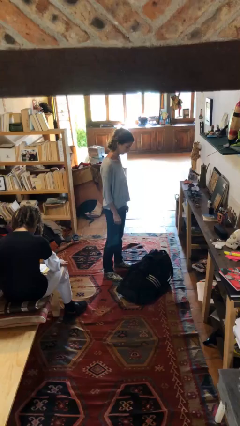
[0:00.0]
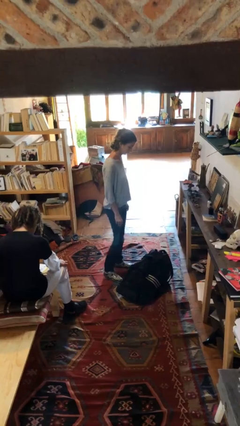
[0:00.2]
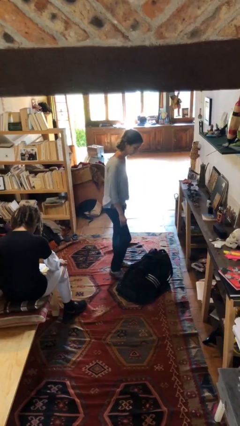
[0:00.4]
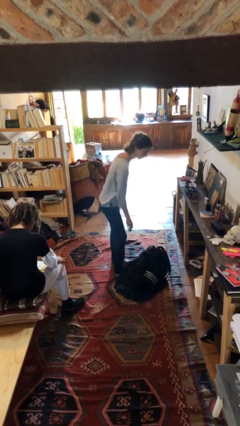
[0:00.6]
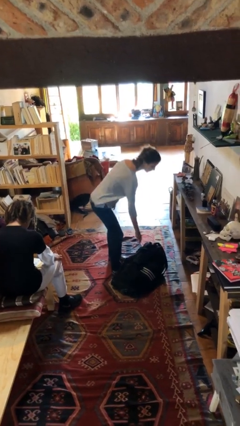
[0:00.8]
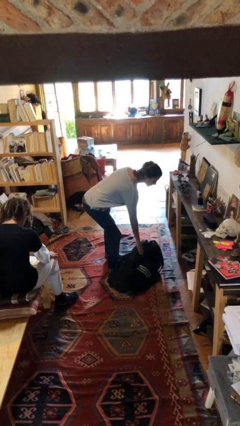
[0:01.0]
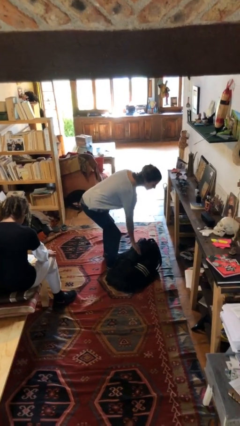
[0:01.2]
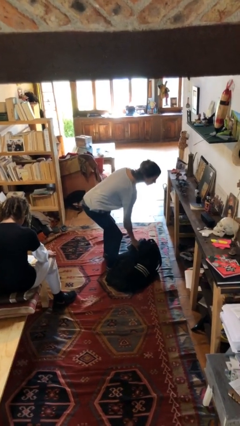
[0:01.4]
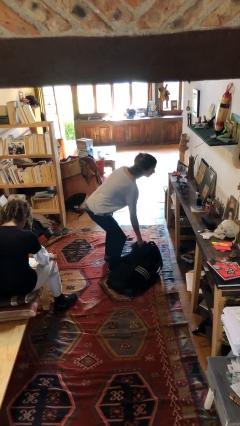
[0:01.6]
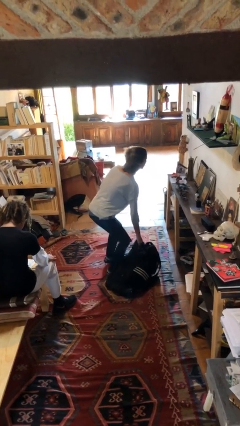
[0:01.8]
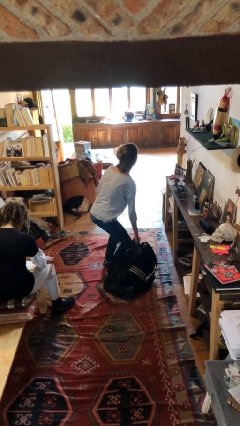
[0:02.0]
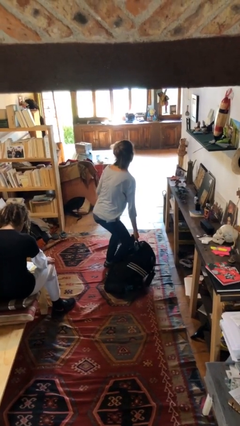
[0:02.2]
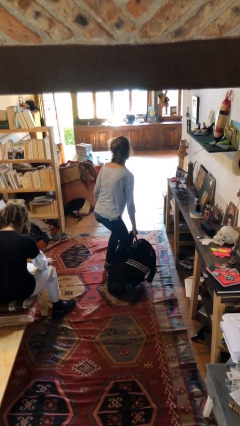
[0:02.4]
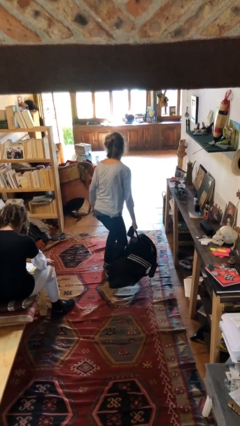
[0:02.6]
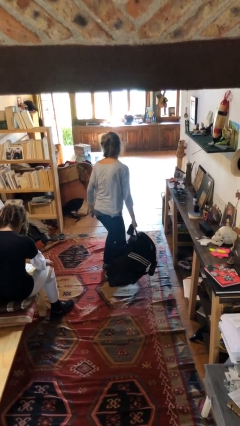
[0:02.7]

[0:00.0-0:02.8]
person picks up object from floor

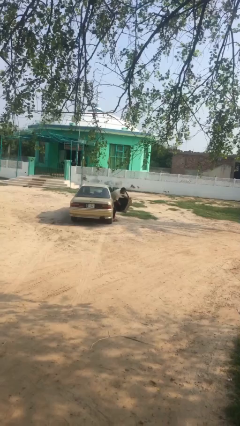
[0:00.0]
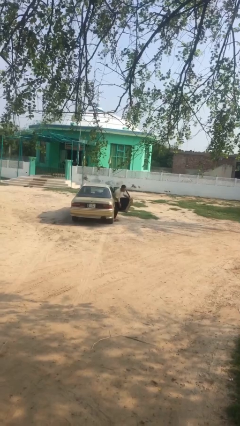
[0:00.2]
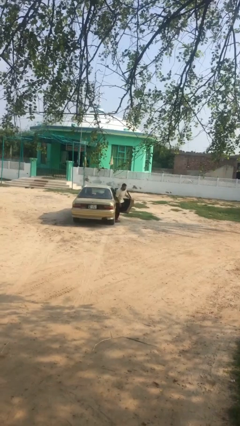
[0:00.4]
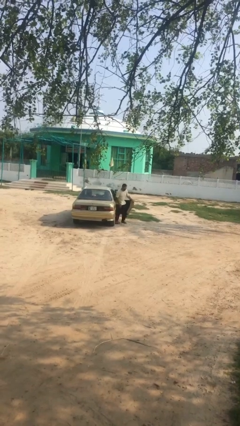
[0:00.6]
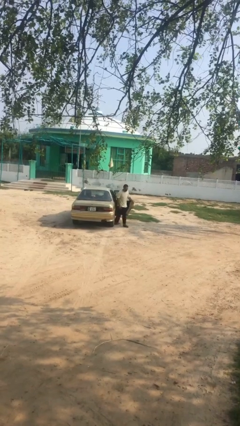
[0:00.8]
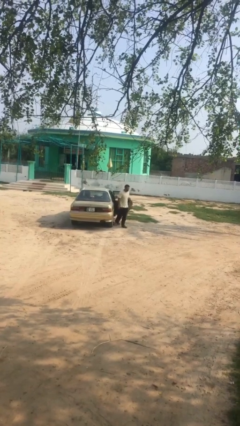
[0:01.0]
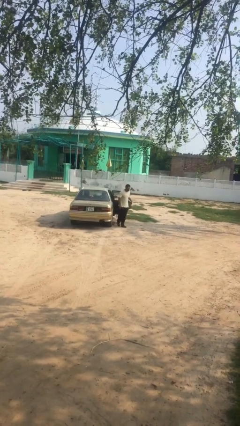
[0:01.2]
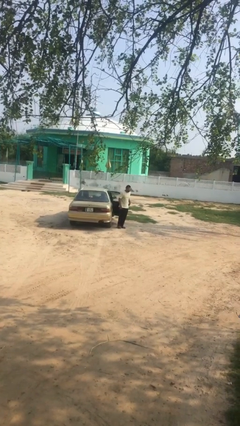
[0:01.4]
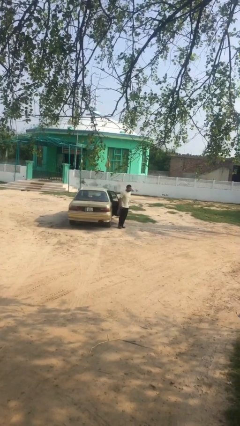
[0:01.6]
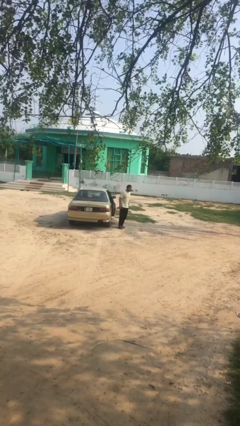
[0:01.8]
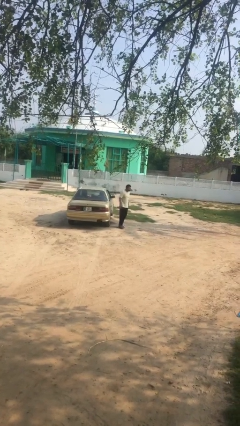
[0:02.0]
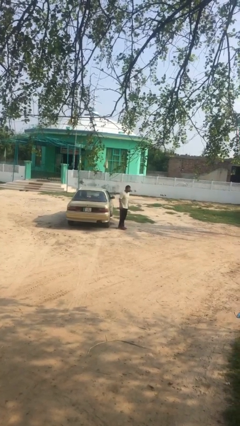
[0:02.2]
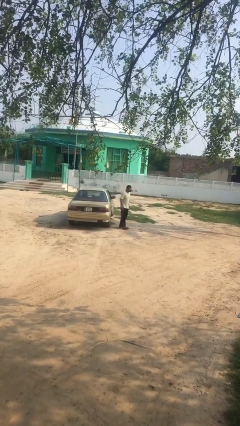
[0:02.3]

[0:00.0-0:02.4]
person closes car door

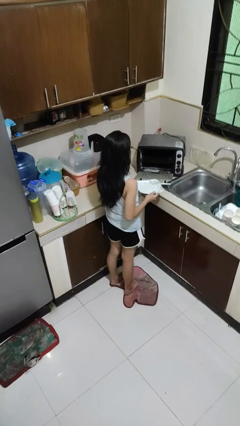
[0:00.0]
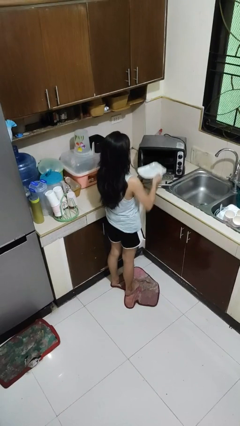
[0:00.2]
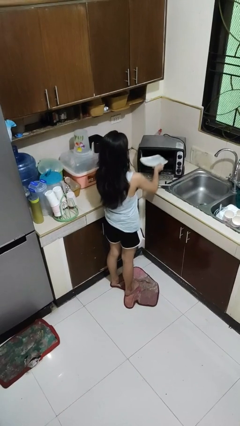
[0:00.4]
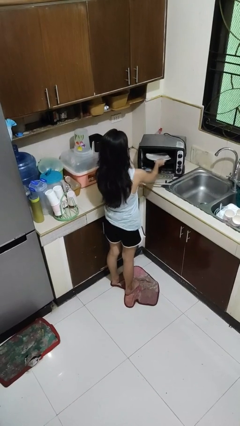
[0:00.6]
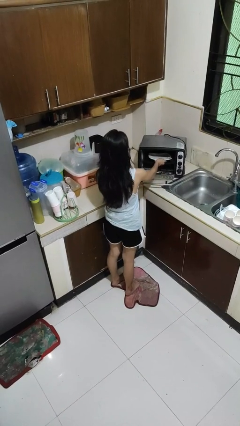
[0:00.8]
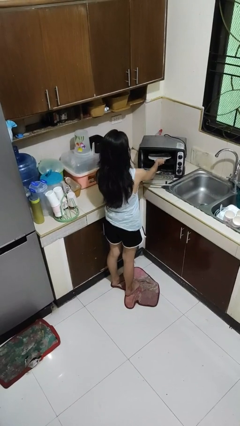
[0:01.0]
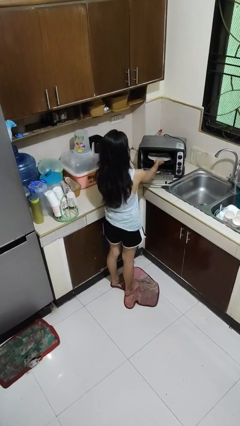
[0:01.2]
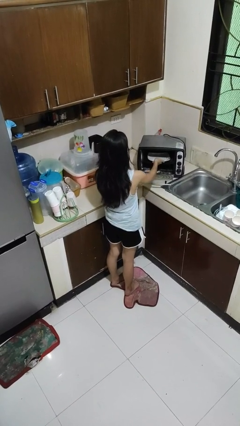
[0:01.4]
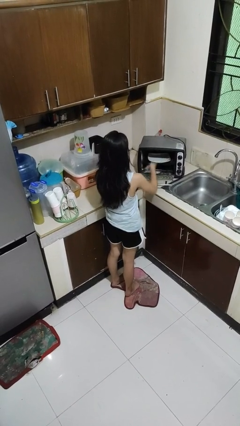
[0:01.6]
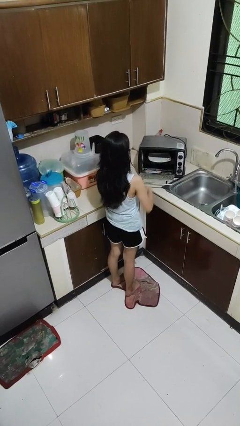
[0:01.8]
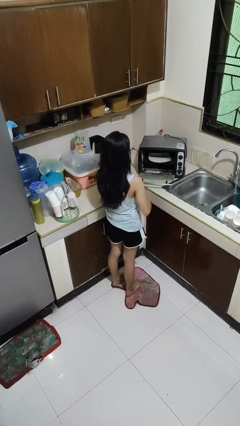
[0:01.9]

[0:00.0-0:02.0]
person puts object into microwave

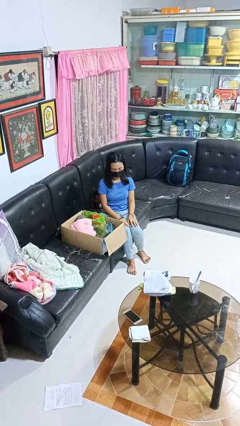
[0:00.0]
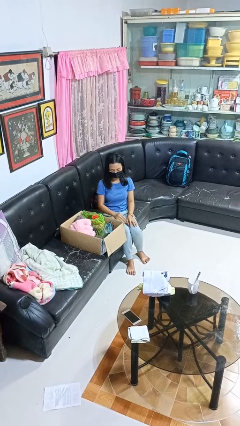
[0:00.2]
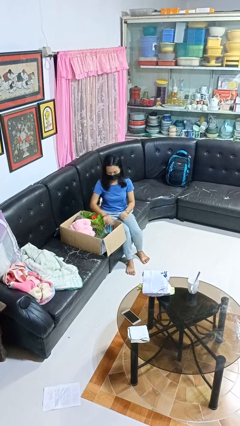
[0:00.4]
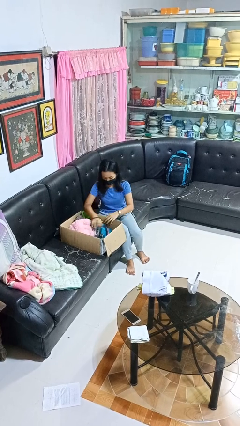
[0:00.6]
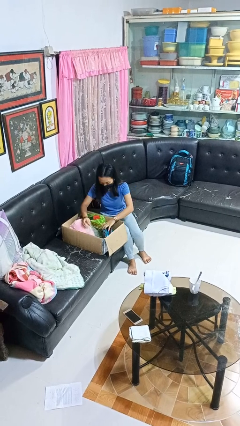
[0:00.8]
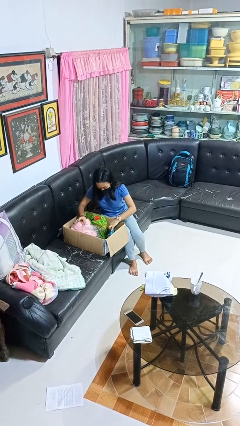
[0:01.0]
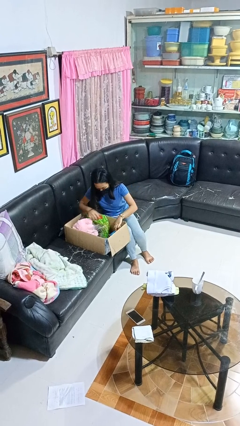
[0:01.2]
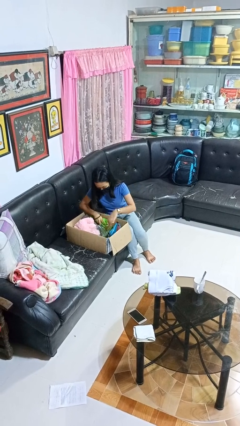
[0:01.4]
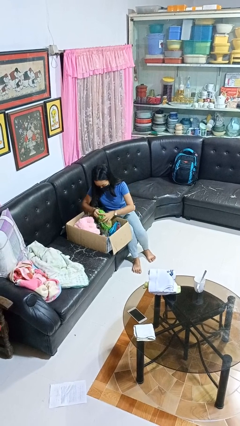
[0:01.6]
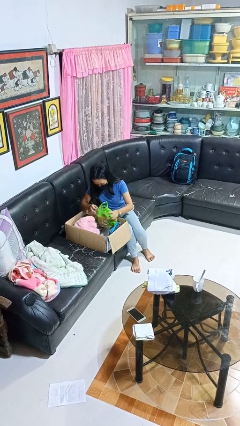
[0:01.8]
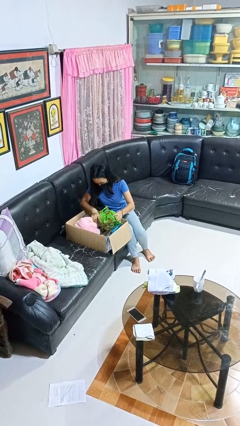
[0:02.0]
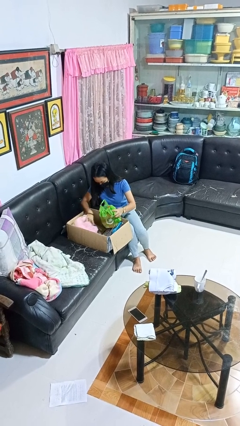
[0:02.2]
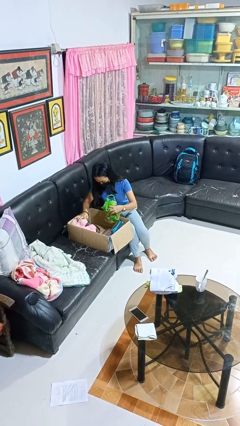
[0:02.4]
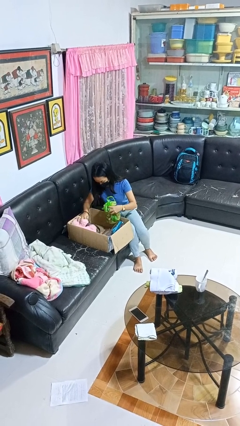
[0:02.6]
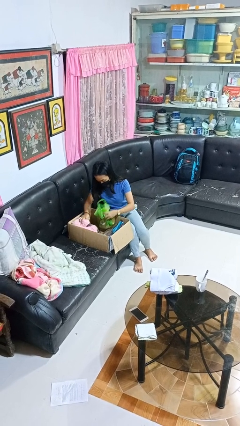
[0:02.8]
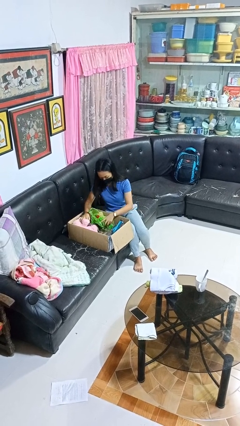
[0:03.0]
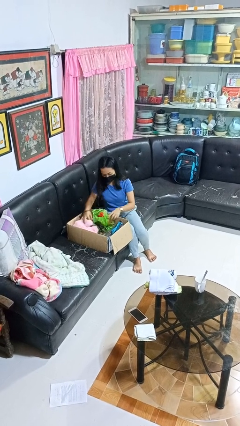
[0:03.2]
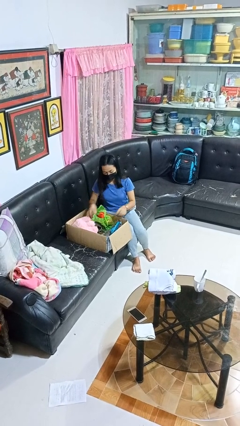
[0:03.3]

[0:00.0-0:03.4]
person searches in box

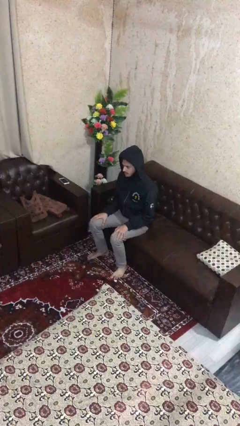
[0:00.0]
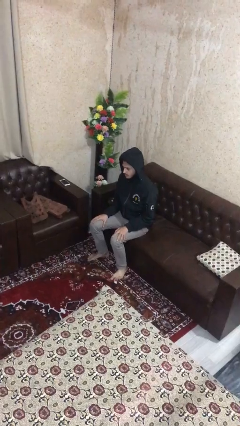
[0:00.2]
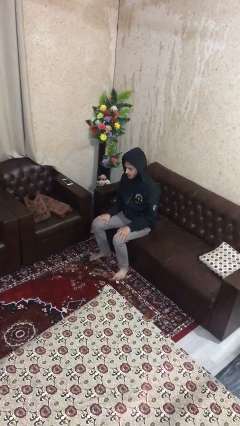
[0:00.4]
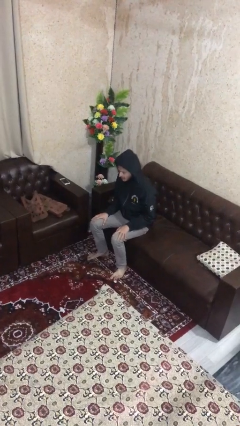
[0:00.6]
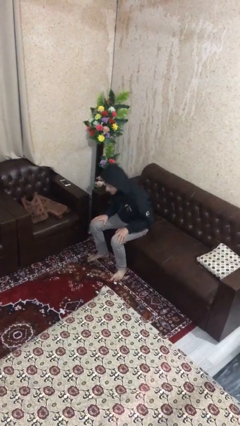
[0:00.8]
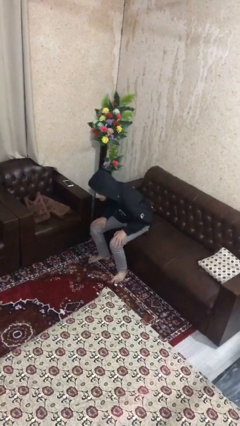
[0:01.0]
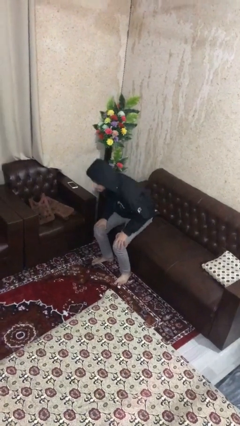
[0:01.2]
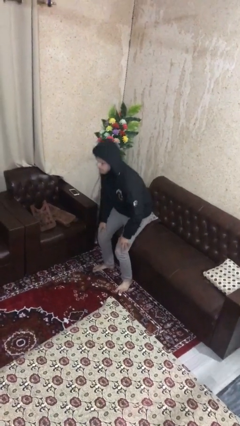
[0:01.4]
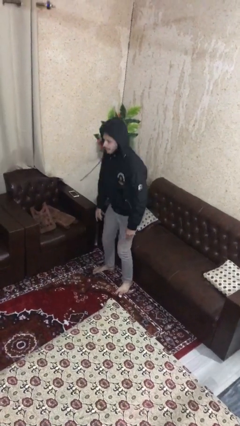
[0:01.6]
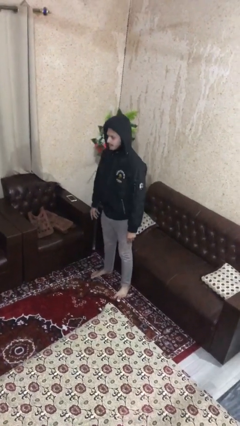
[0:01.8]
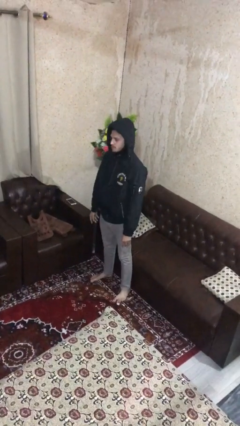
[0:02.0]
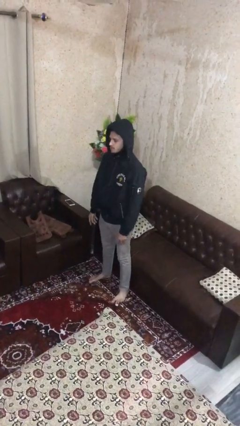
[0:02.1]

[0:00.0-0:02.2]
person stands up

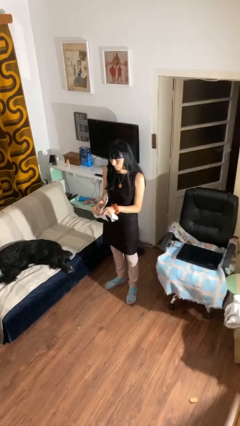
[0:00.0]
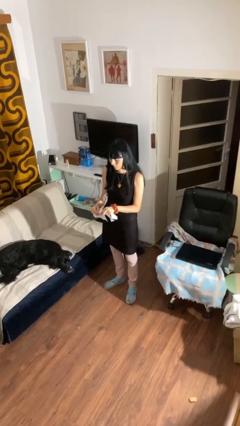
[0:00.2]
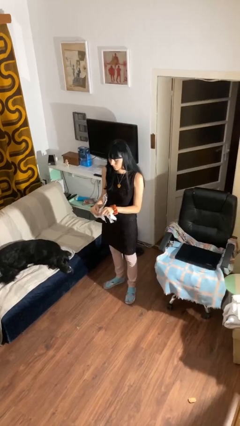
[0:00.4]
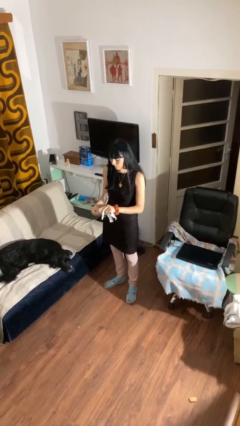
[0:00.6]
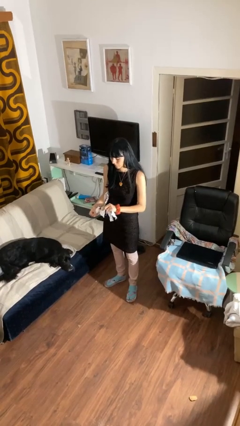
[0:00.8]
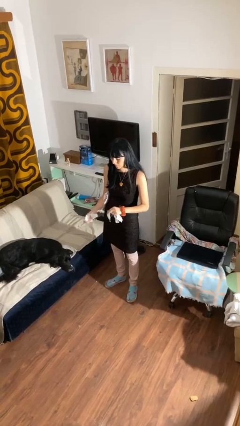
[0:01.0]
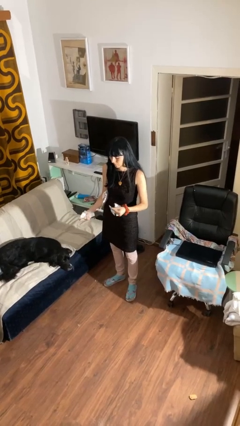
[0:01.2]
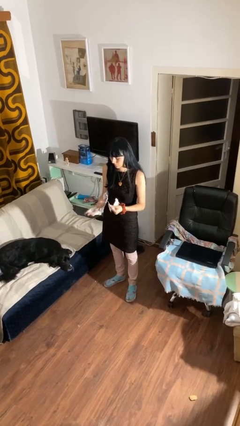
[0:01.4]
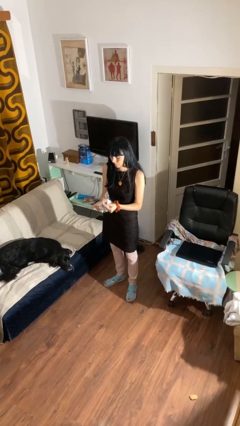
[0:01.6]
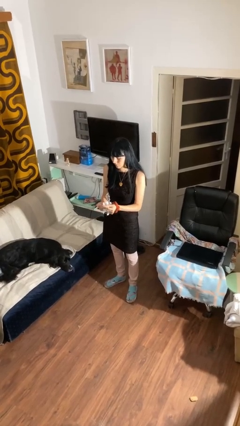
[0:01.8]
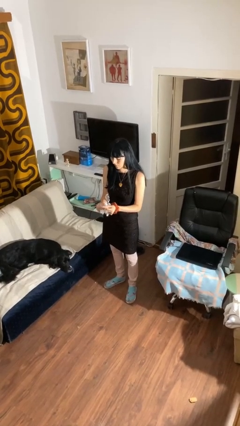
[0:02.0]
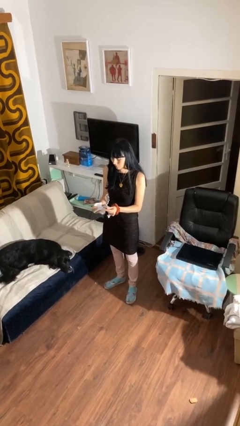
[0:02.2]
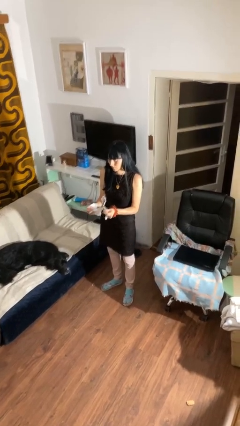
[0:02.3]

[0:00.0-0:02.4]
person tears paper

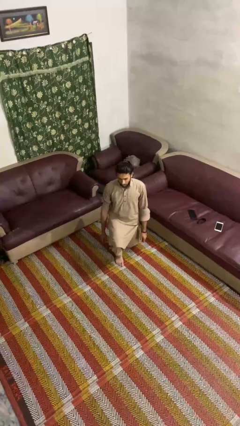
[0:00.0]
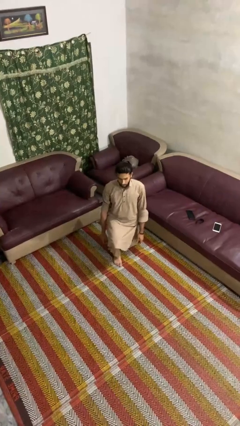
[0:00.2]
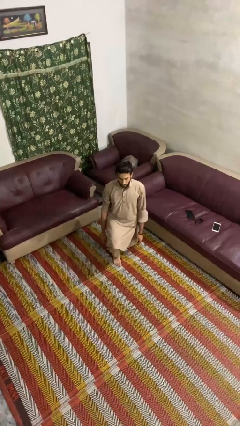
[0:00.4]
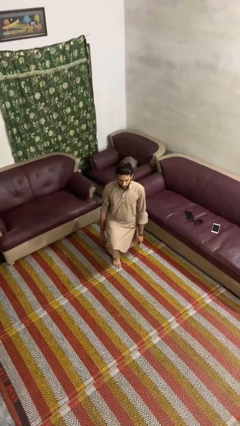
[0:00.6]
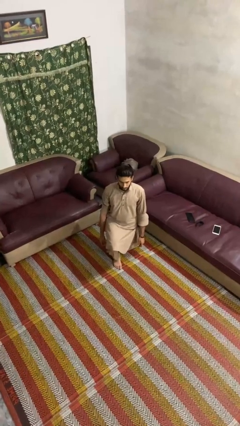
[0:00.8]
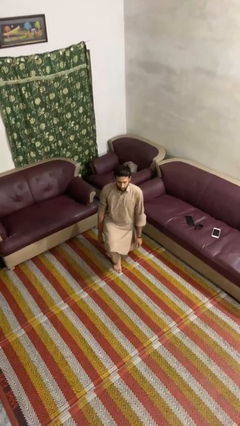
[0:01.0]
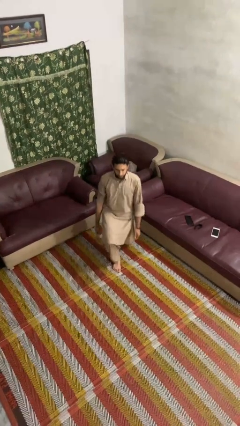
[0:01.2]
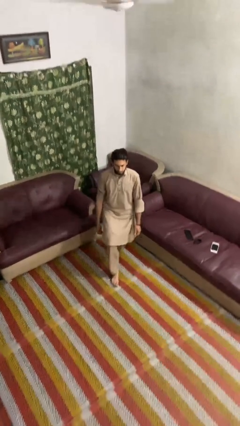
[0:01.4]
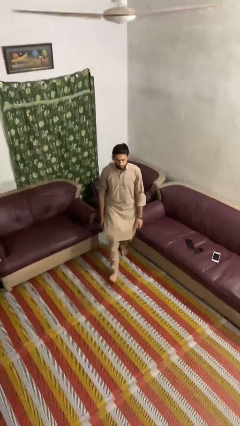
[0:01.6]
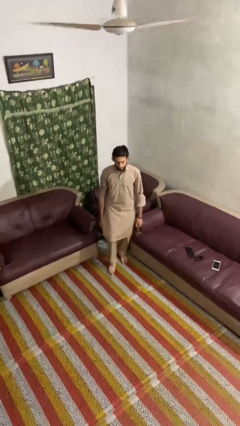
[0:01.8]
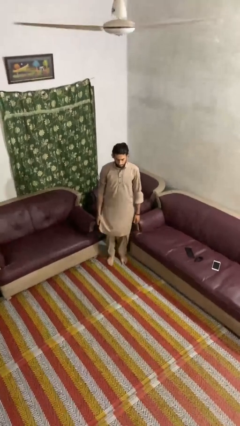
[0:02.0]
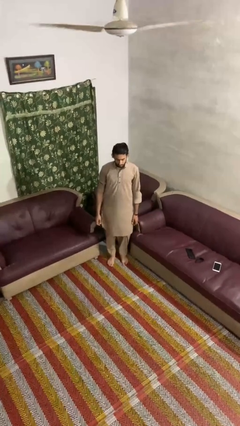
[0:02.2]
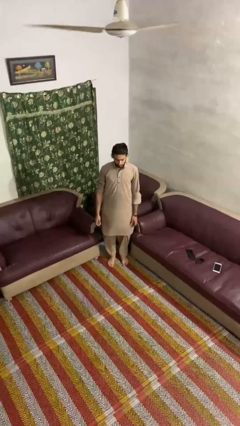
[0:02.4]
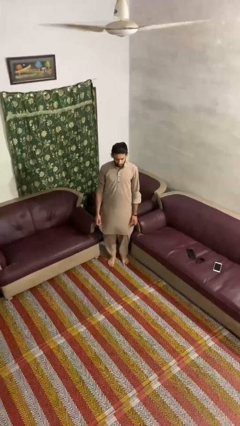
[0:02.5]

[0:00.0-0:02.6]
person stands up from floor
